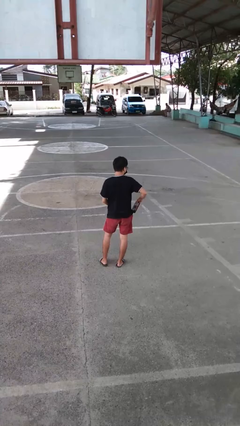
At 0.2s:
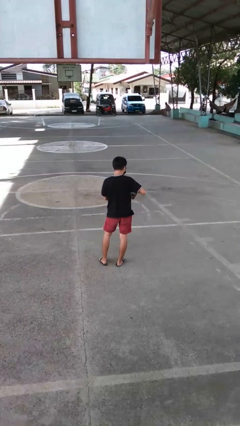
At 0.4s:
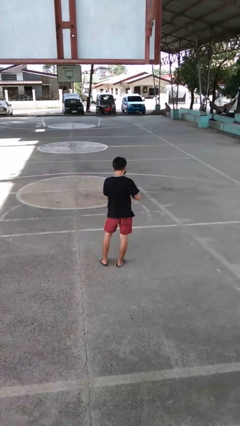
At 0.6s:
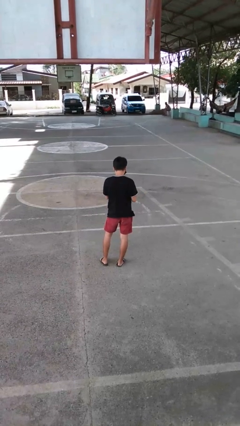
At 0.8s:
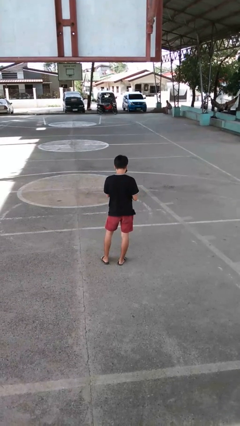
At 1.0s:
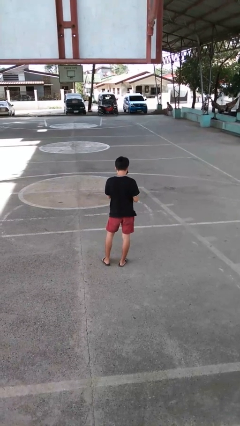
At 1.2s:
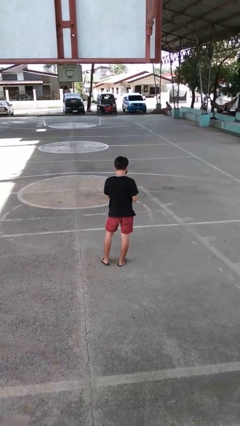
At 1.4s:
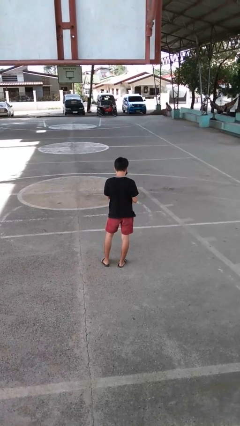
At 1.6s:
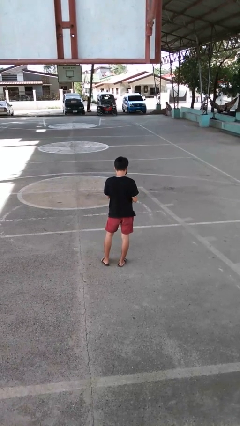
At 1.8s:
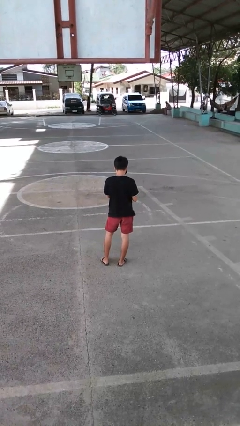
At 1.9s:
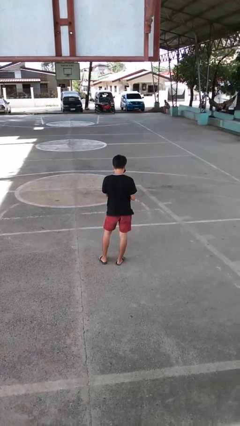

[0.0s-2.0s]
person takes phone from pocket

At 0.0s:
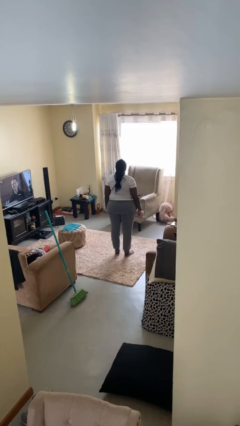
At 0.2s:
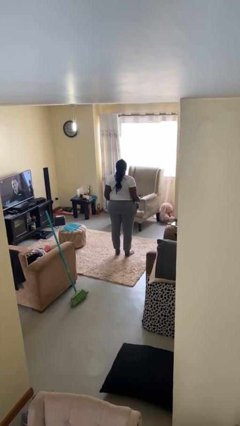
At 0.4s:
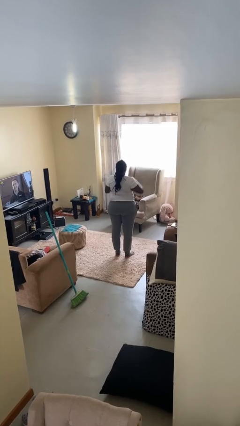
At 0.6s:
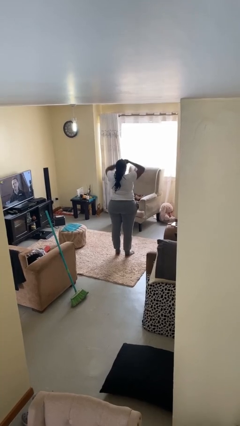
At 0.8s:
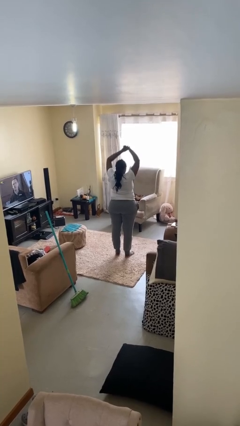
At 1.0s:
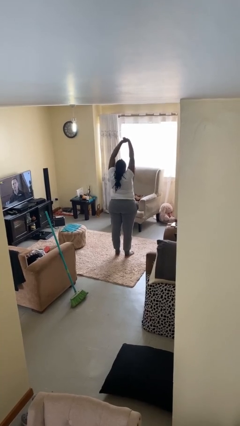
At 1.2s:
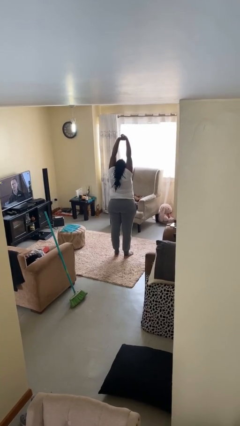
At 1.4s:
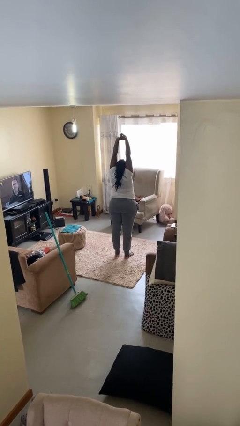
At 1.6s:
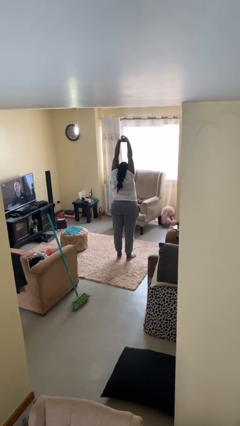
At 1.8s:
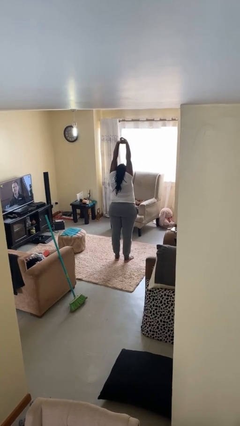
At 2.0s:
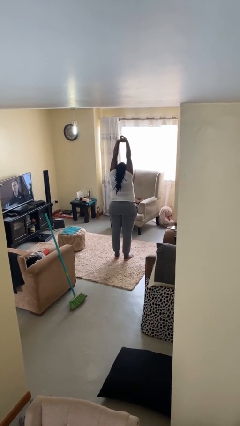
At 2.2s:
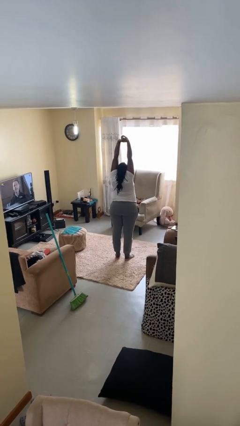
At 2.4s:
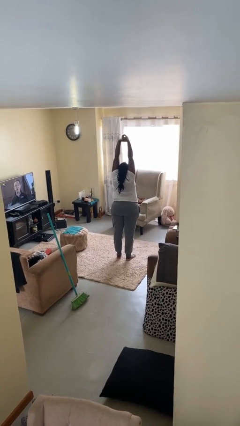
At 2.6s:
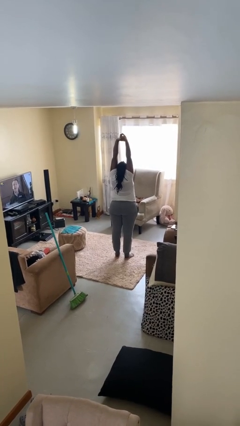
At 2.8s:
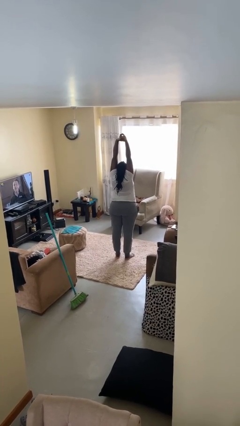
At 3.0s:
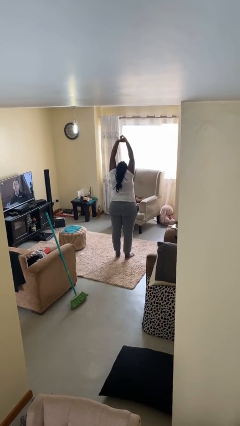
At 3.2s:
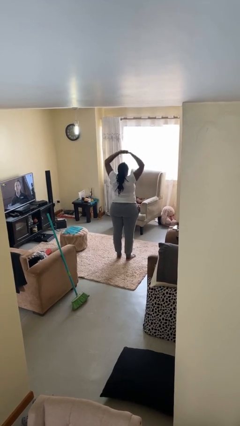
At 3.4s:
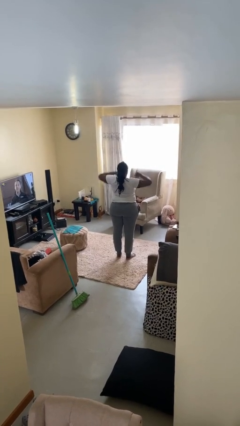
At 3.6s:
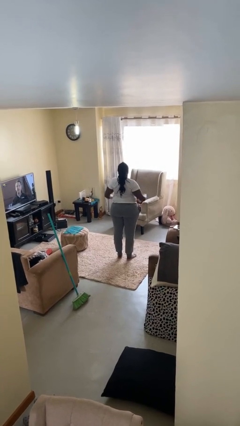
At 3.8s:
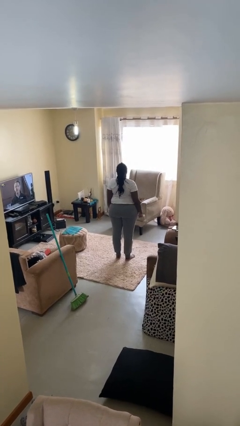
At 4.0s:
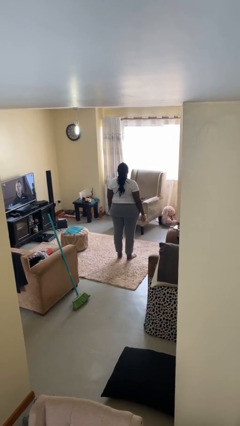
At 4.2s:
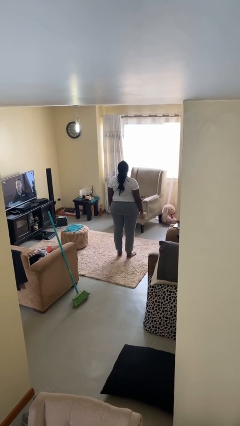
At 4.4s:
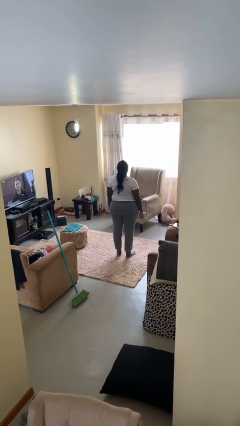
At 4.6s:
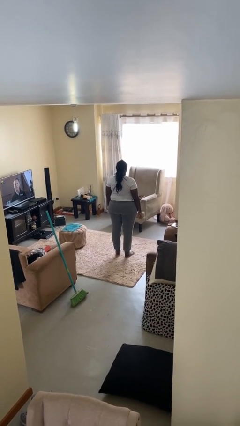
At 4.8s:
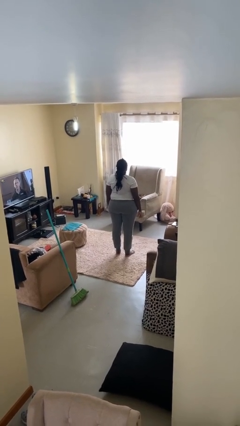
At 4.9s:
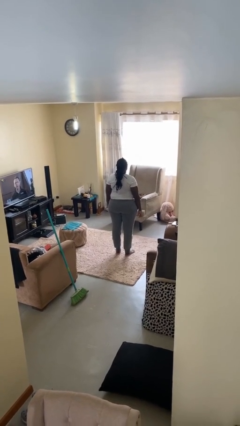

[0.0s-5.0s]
person stretches arms over head

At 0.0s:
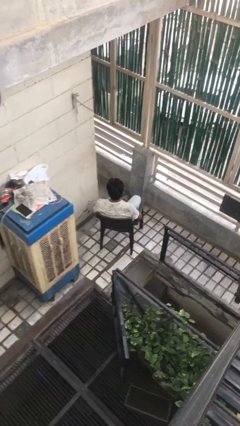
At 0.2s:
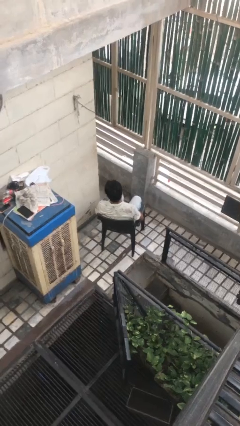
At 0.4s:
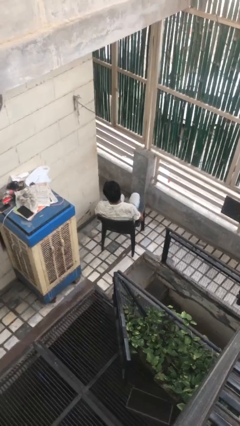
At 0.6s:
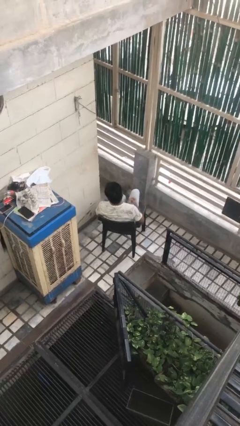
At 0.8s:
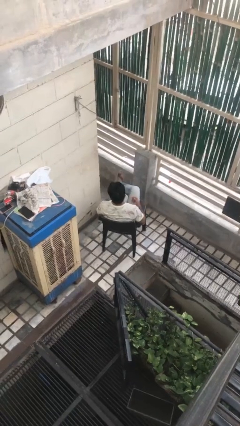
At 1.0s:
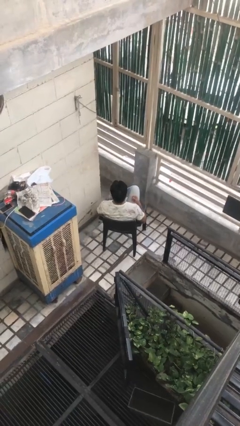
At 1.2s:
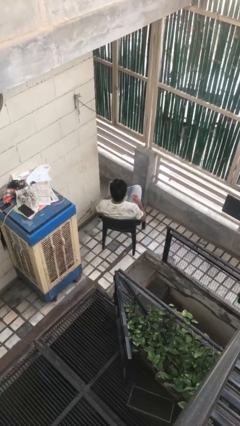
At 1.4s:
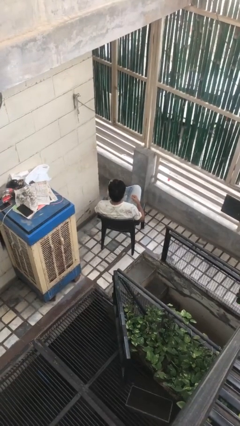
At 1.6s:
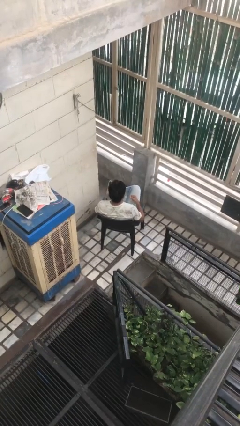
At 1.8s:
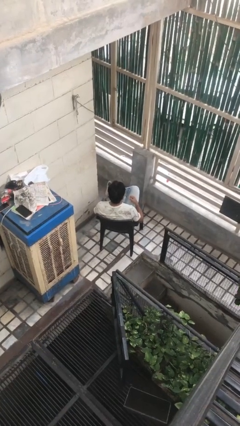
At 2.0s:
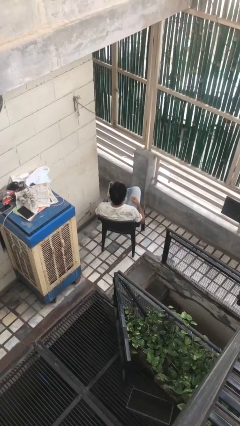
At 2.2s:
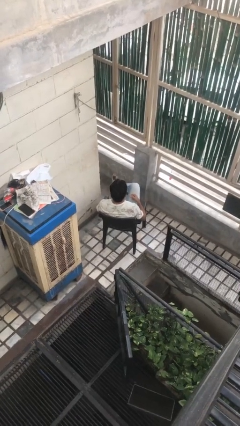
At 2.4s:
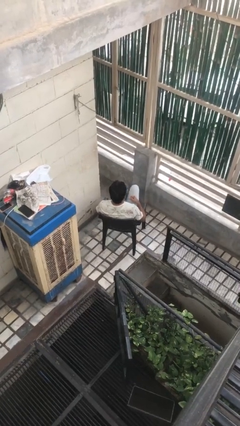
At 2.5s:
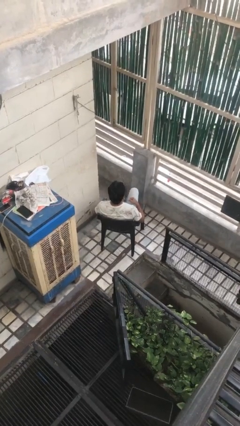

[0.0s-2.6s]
person crosses legs

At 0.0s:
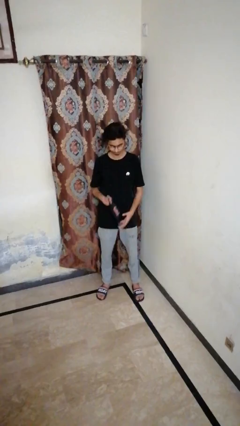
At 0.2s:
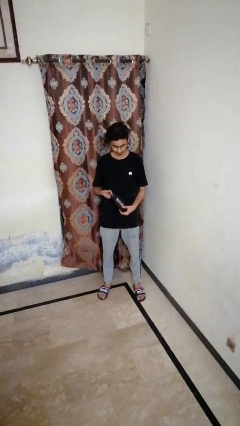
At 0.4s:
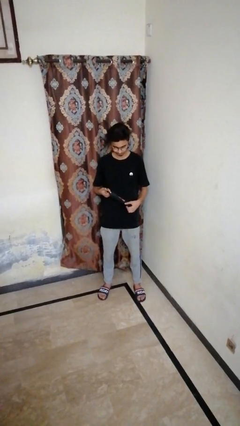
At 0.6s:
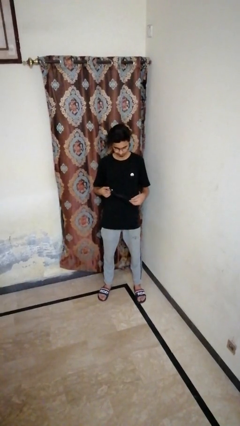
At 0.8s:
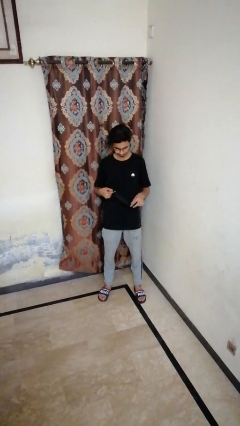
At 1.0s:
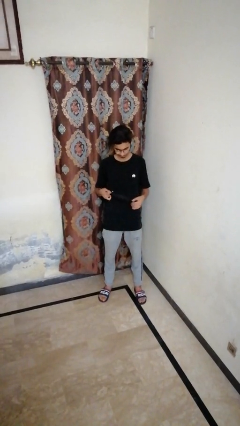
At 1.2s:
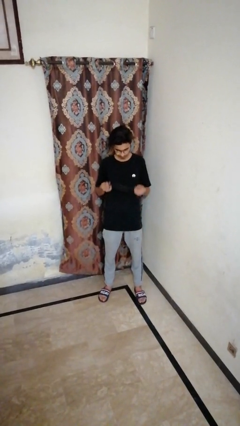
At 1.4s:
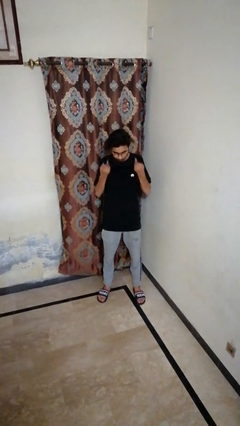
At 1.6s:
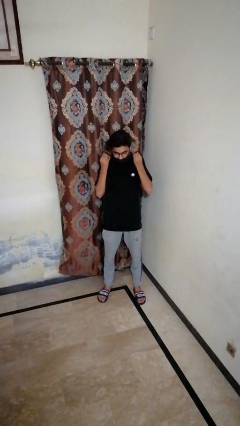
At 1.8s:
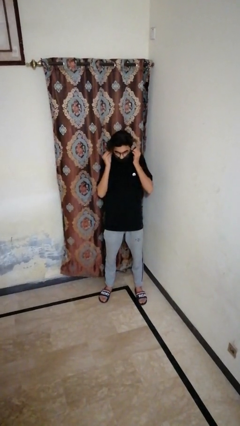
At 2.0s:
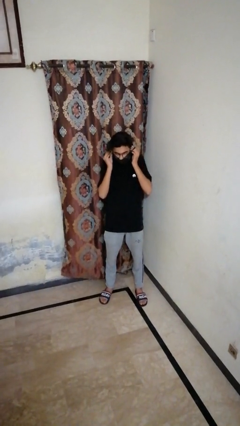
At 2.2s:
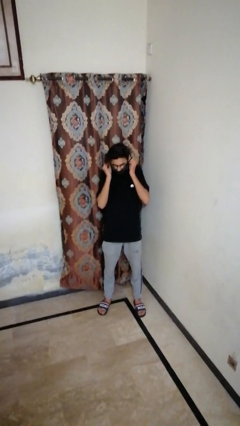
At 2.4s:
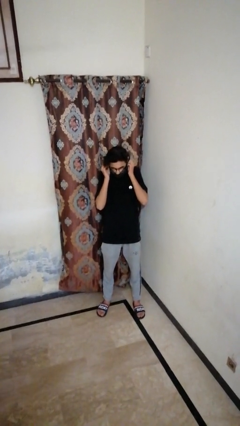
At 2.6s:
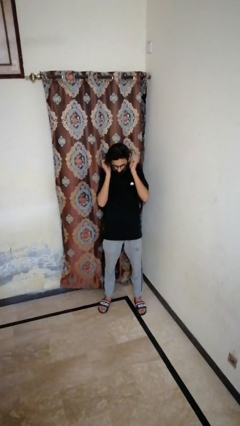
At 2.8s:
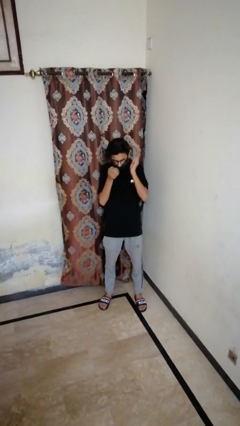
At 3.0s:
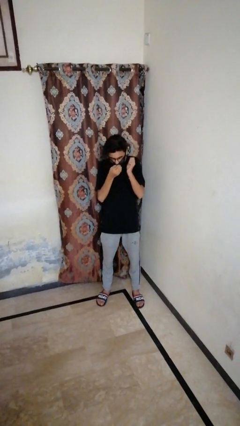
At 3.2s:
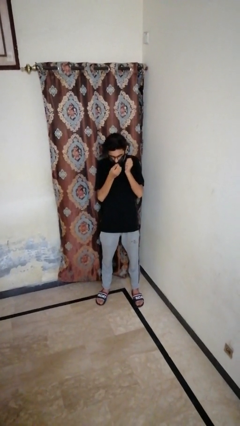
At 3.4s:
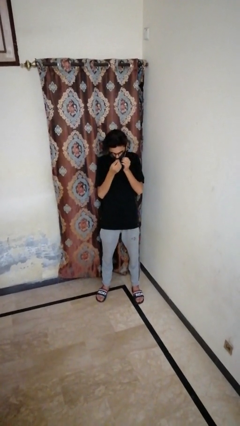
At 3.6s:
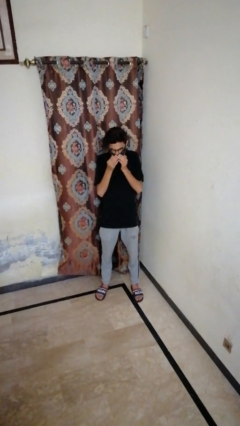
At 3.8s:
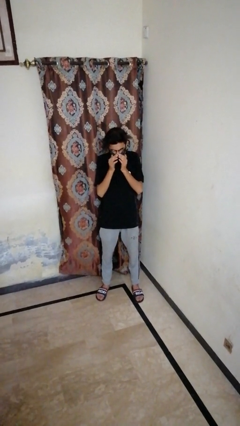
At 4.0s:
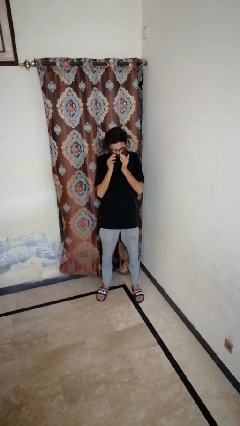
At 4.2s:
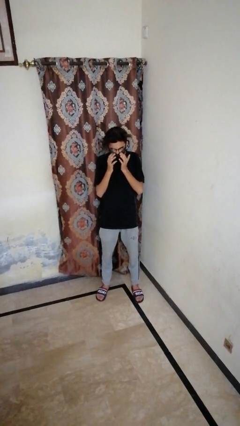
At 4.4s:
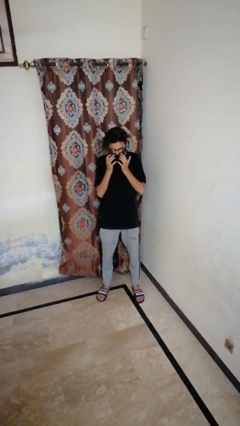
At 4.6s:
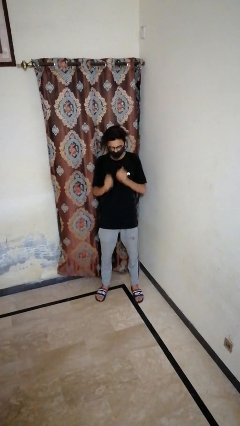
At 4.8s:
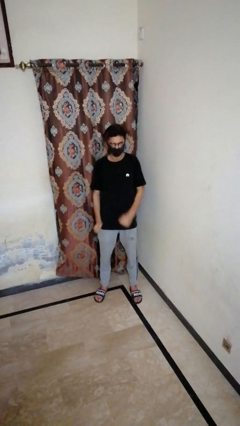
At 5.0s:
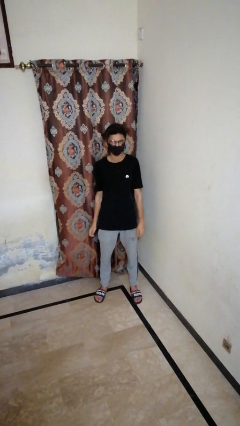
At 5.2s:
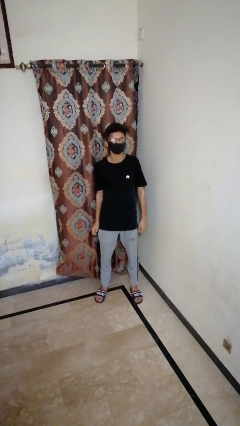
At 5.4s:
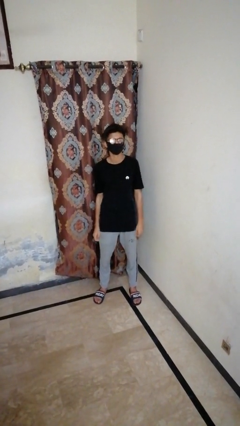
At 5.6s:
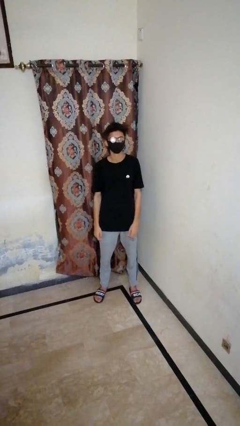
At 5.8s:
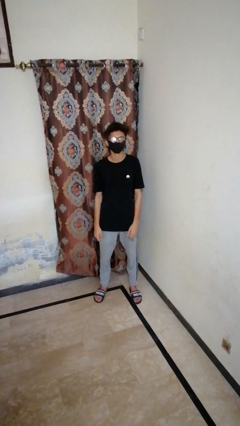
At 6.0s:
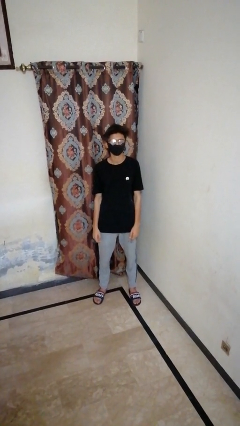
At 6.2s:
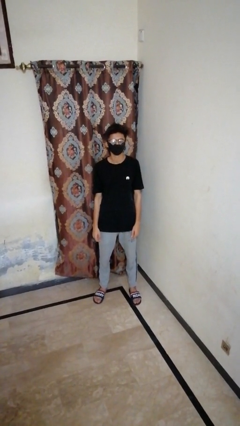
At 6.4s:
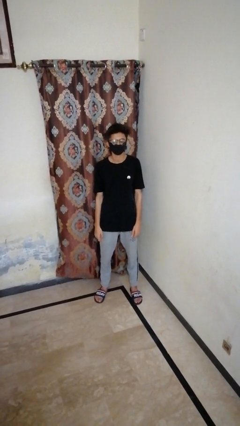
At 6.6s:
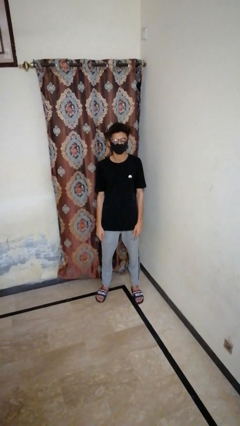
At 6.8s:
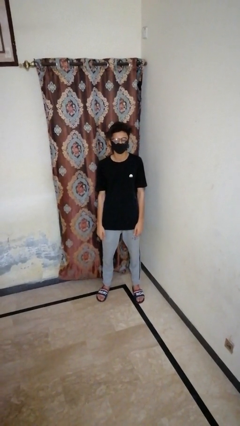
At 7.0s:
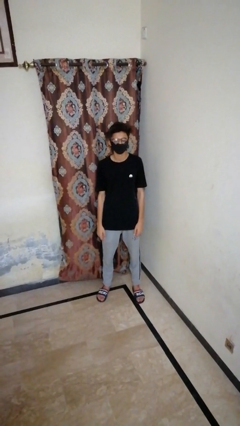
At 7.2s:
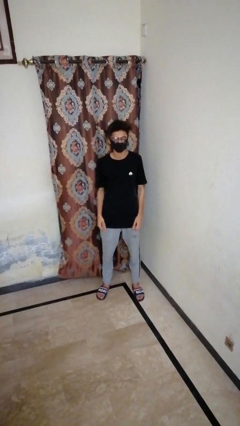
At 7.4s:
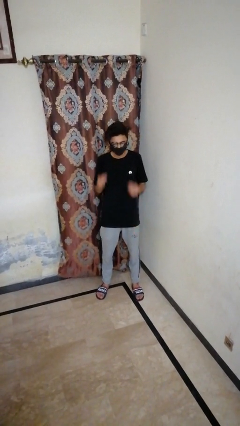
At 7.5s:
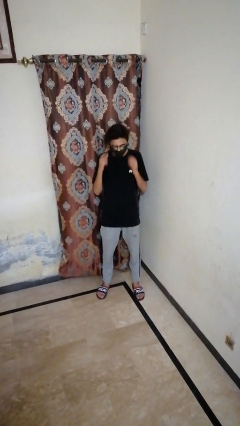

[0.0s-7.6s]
person puts on facemask

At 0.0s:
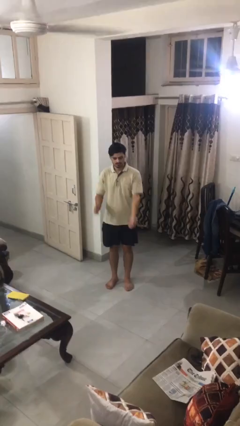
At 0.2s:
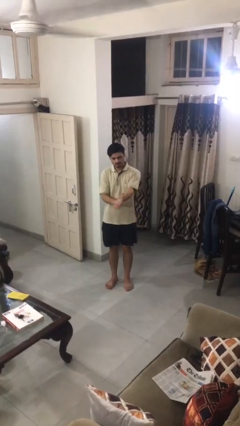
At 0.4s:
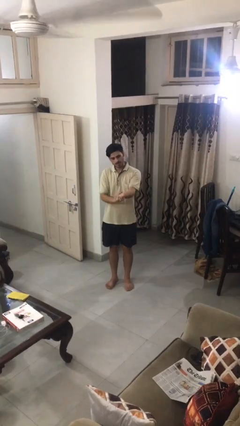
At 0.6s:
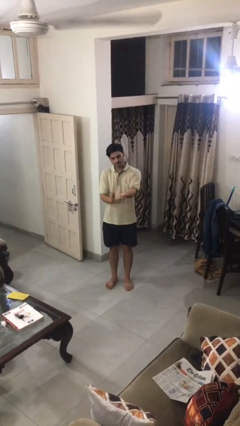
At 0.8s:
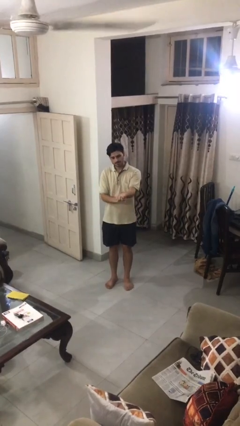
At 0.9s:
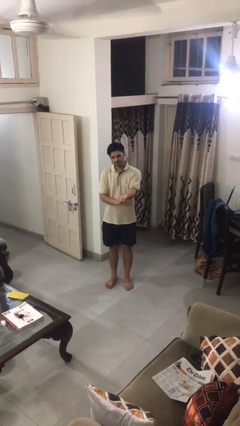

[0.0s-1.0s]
person swats bug
